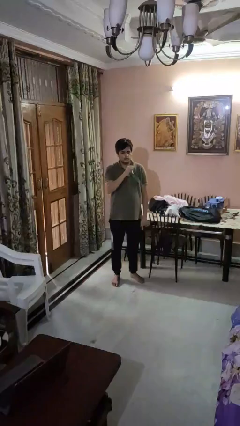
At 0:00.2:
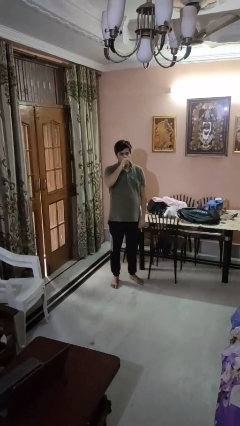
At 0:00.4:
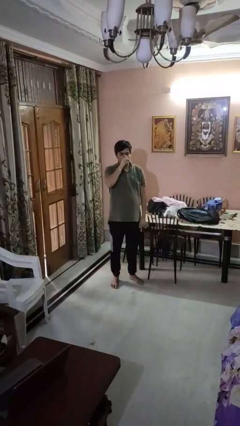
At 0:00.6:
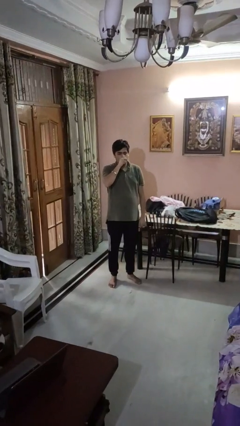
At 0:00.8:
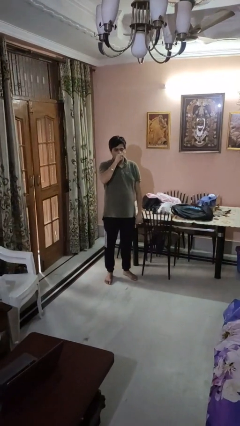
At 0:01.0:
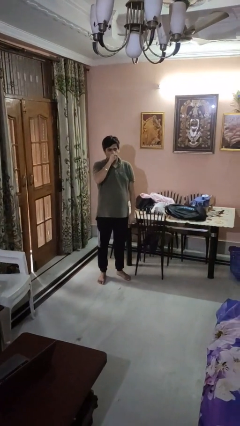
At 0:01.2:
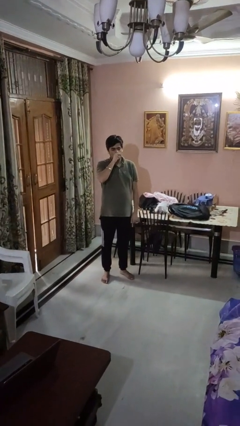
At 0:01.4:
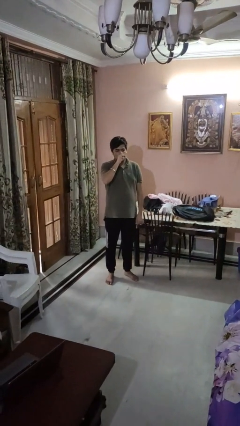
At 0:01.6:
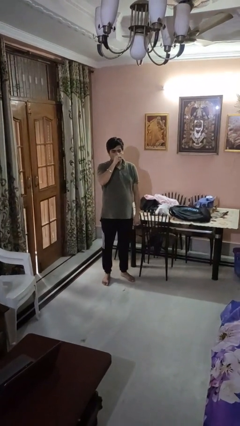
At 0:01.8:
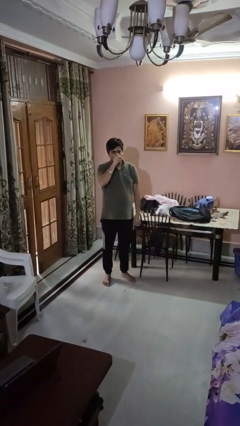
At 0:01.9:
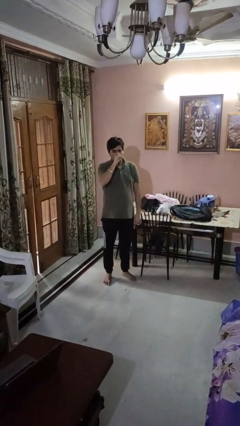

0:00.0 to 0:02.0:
person vapes

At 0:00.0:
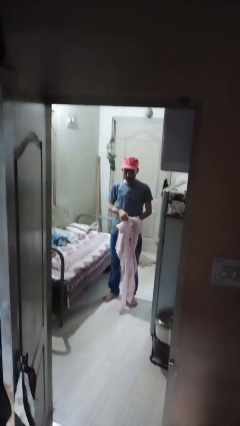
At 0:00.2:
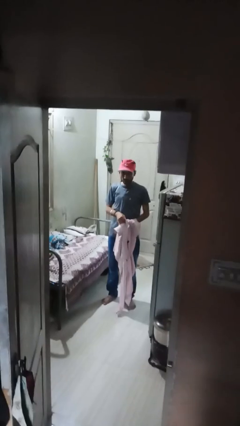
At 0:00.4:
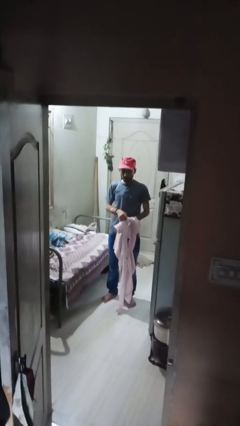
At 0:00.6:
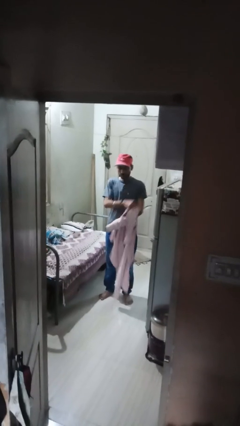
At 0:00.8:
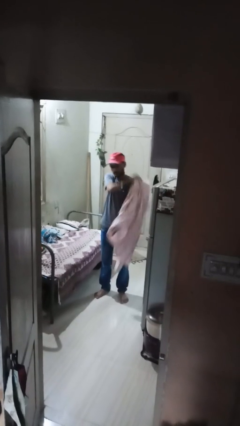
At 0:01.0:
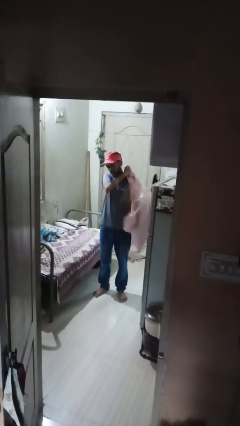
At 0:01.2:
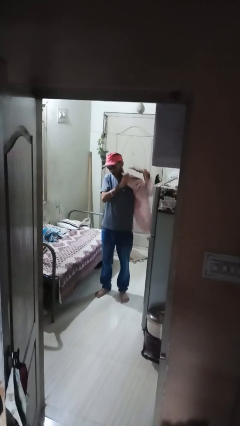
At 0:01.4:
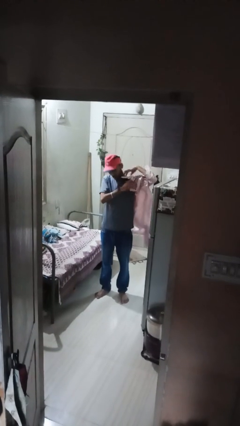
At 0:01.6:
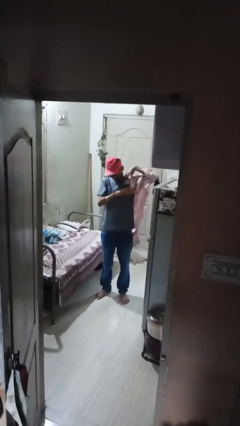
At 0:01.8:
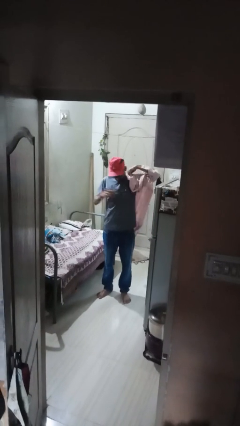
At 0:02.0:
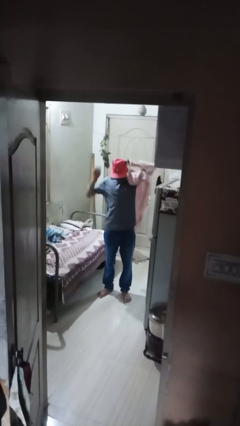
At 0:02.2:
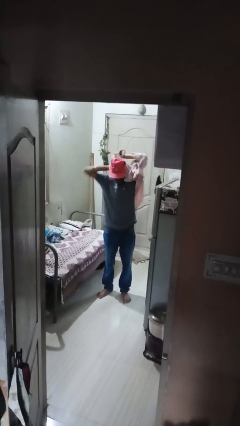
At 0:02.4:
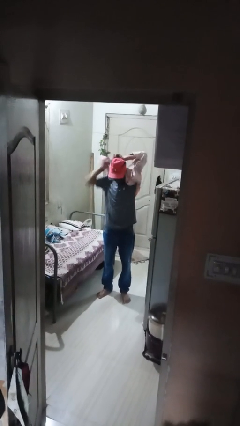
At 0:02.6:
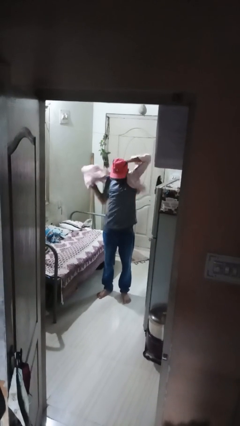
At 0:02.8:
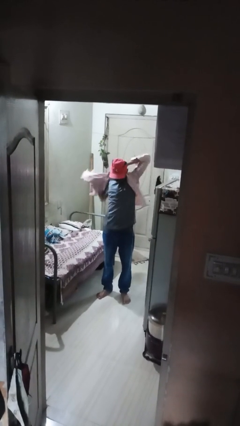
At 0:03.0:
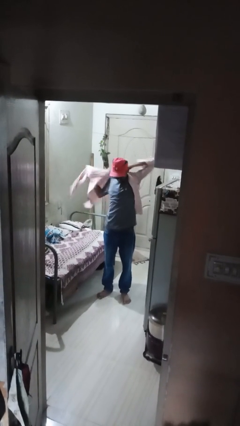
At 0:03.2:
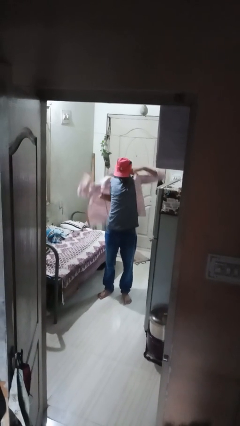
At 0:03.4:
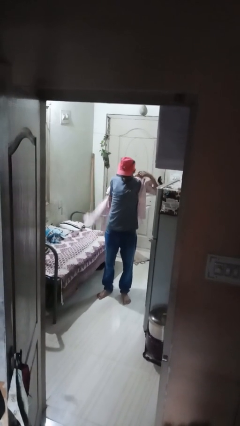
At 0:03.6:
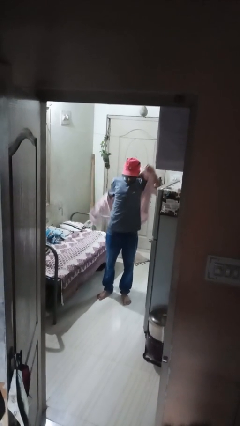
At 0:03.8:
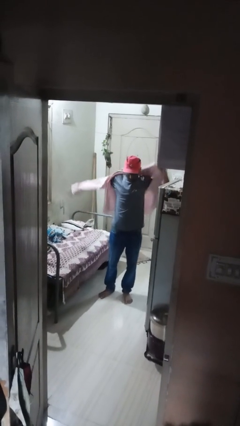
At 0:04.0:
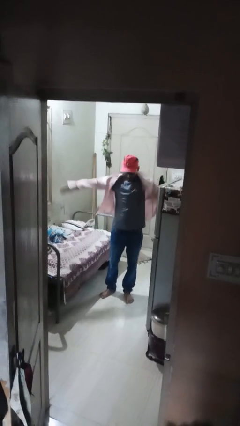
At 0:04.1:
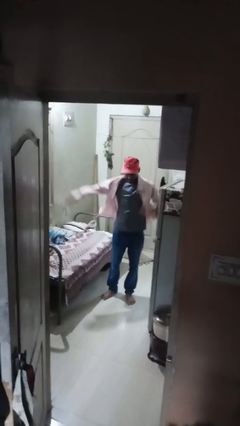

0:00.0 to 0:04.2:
person puts on shirt

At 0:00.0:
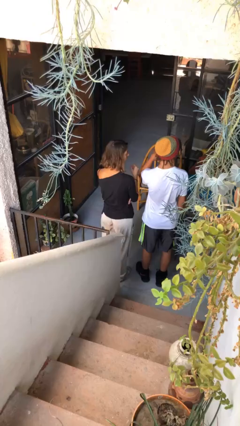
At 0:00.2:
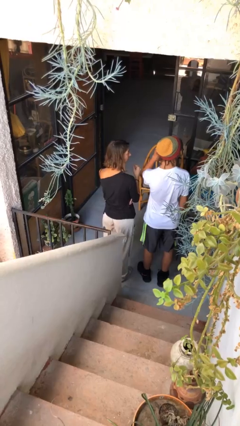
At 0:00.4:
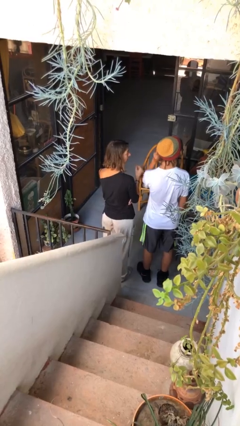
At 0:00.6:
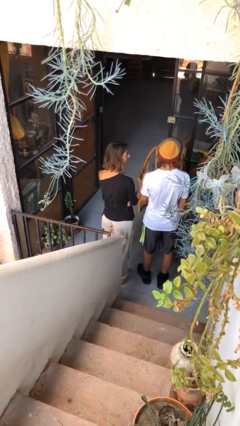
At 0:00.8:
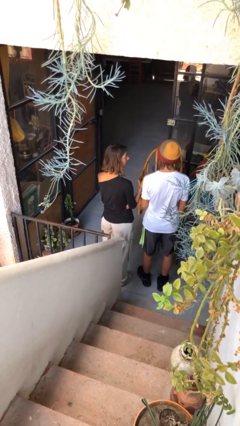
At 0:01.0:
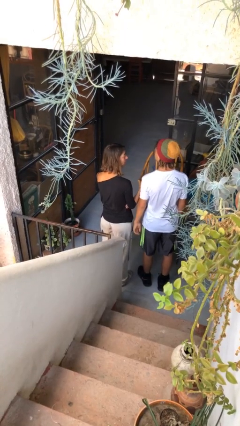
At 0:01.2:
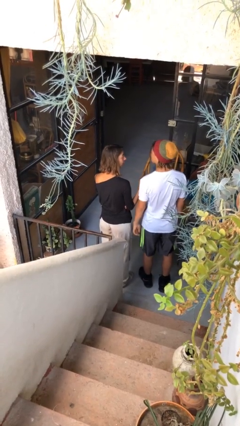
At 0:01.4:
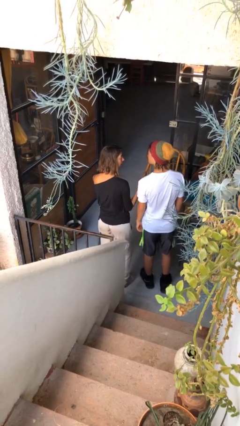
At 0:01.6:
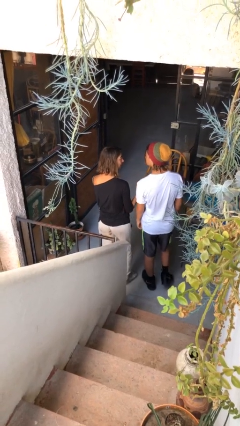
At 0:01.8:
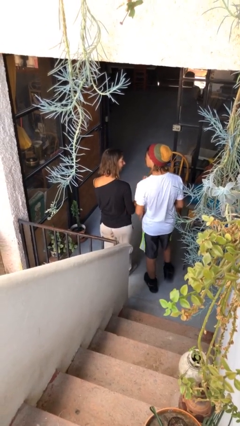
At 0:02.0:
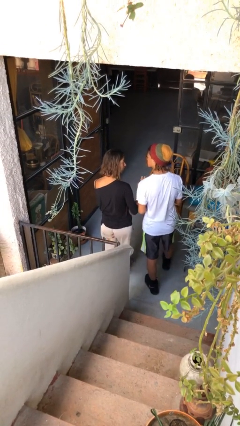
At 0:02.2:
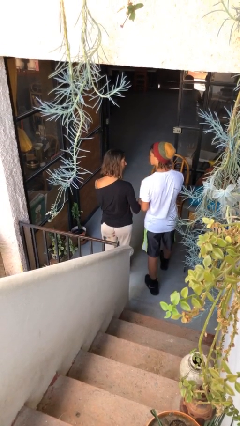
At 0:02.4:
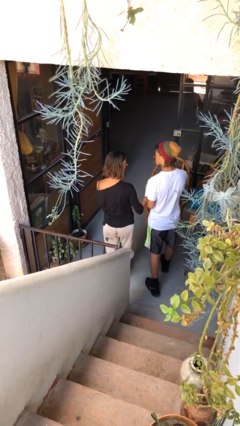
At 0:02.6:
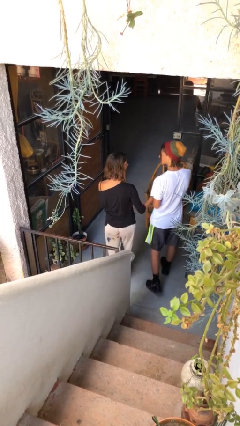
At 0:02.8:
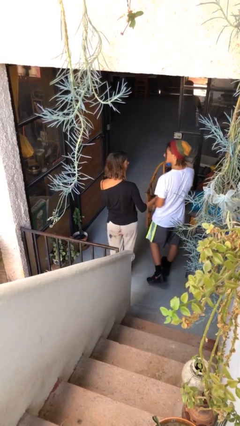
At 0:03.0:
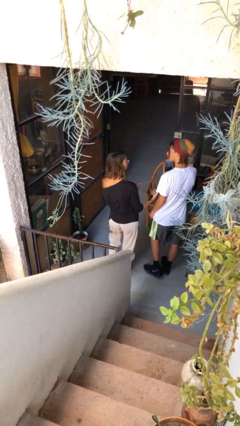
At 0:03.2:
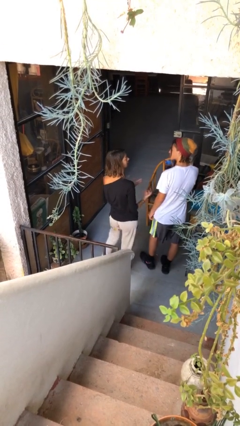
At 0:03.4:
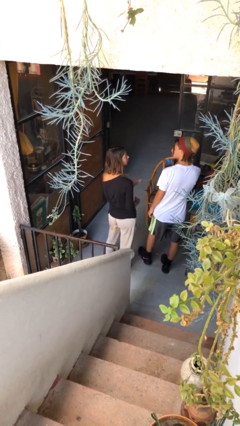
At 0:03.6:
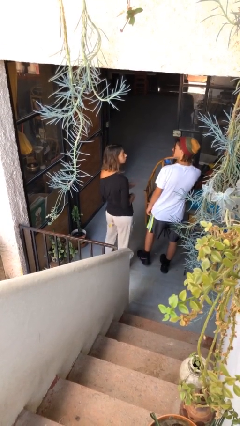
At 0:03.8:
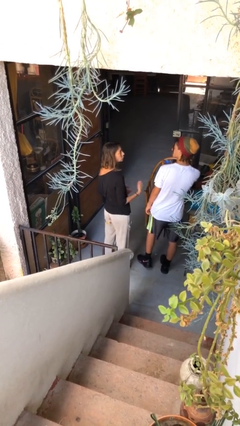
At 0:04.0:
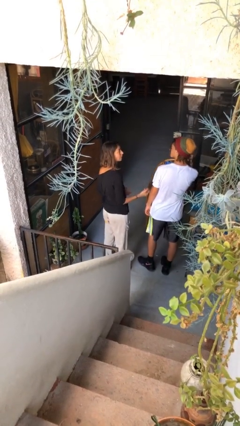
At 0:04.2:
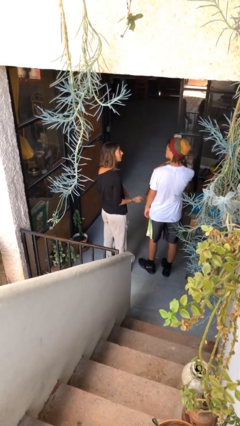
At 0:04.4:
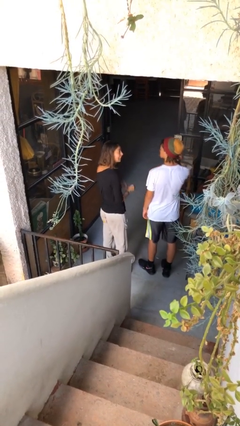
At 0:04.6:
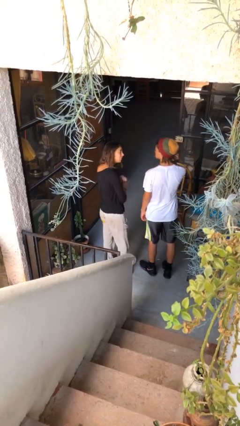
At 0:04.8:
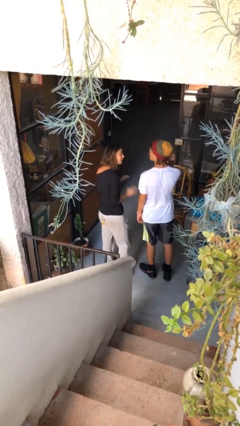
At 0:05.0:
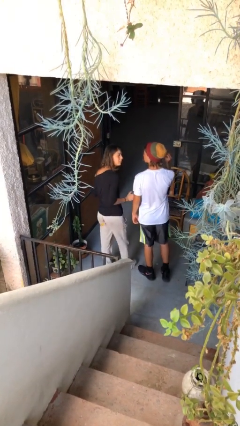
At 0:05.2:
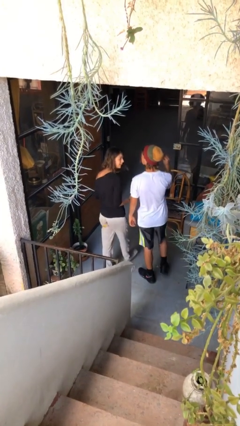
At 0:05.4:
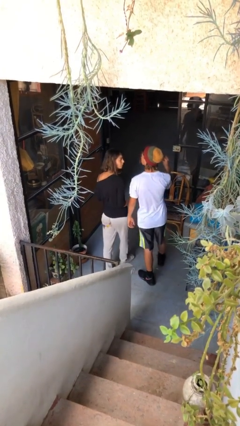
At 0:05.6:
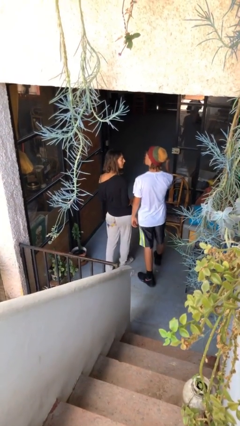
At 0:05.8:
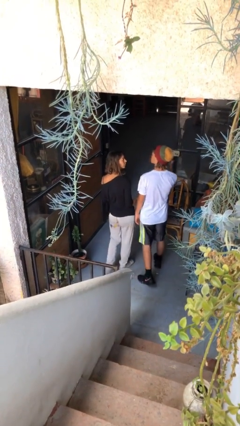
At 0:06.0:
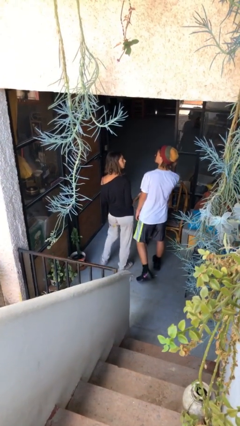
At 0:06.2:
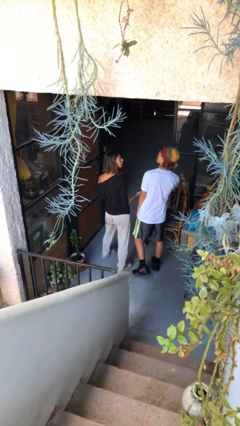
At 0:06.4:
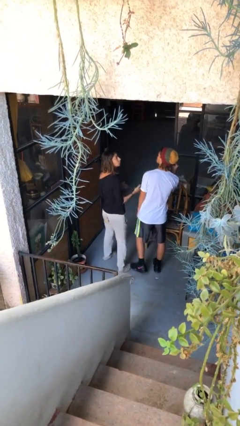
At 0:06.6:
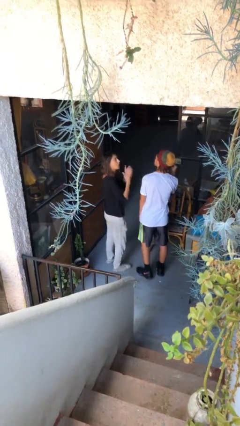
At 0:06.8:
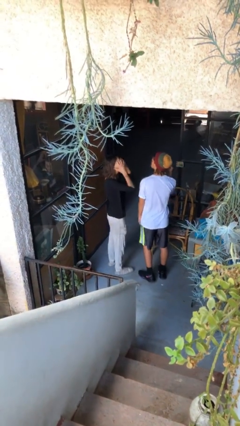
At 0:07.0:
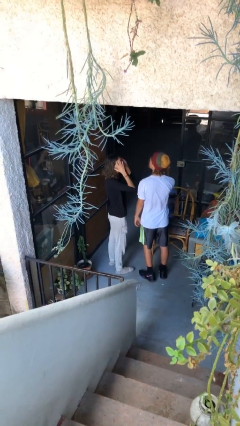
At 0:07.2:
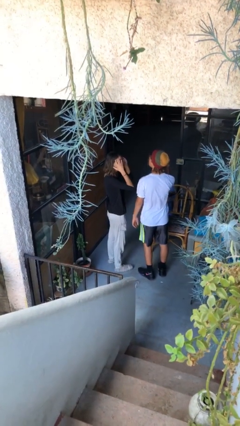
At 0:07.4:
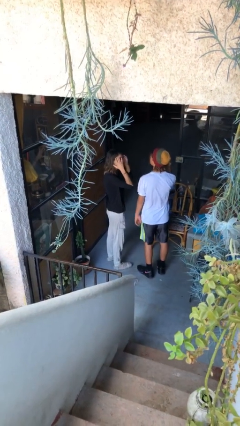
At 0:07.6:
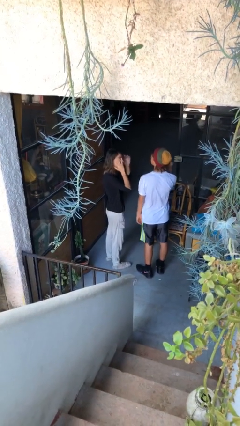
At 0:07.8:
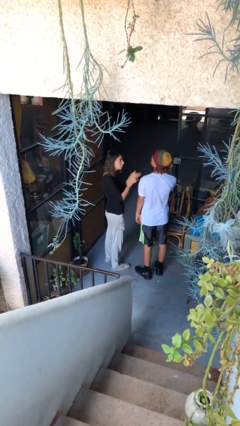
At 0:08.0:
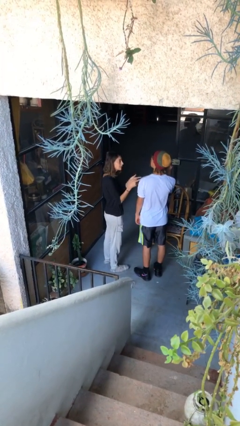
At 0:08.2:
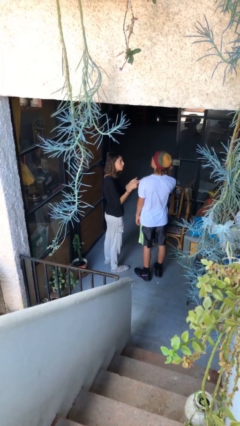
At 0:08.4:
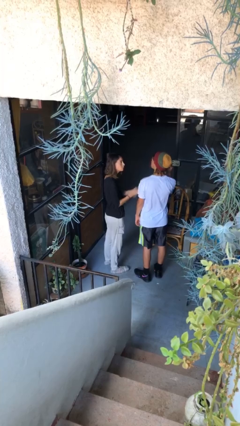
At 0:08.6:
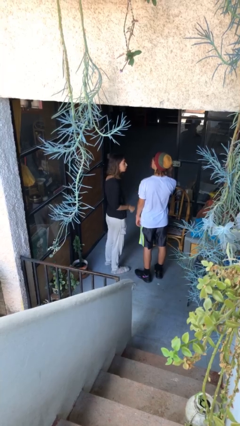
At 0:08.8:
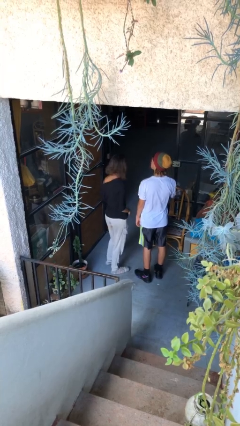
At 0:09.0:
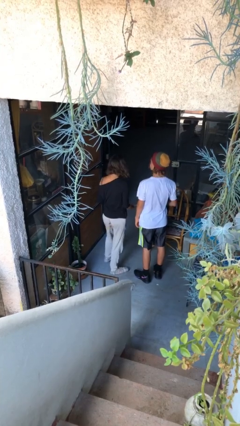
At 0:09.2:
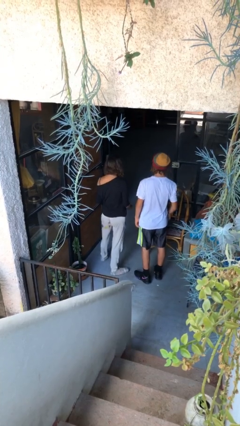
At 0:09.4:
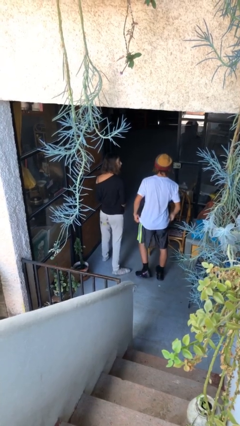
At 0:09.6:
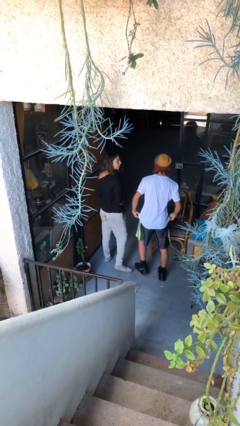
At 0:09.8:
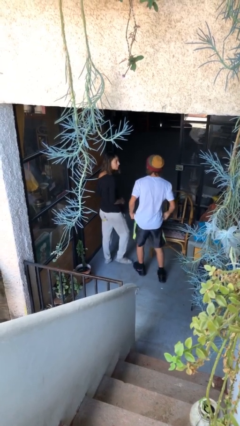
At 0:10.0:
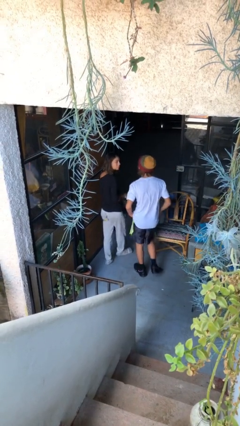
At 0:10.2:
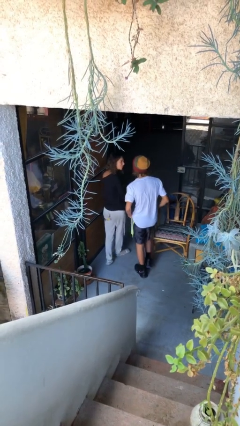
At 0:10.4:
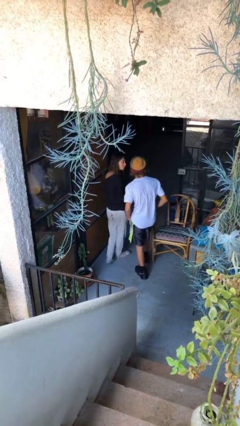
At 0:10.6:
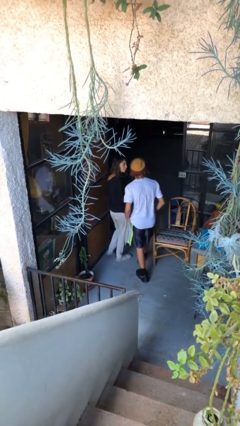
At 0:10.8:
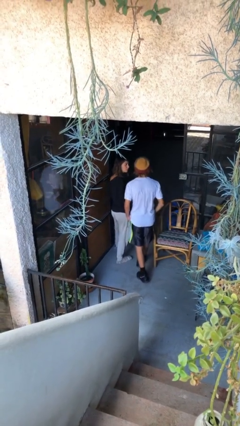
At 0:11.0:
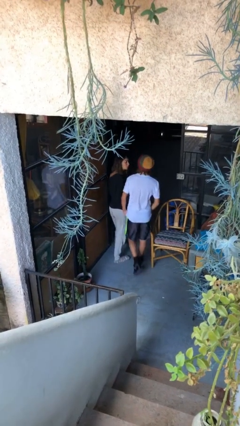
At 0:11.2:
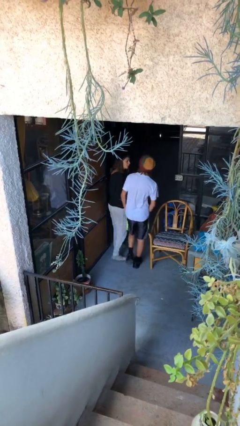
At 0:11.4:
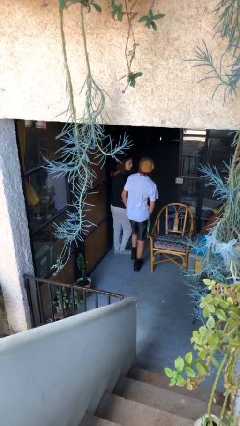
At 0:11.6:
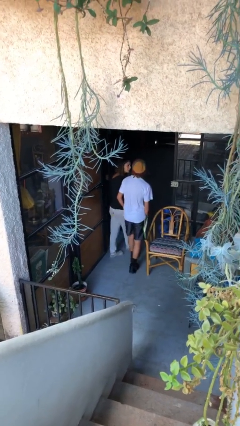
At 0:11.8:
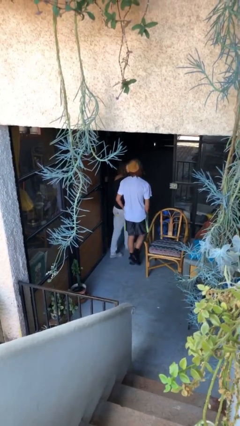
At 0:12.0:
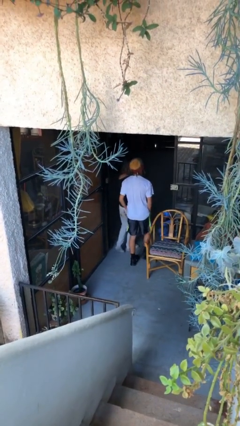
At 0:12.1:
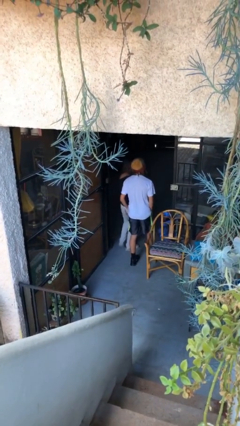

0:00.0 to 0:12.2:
person talks to person
